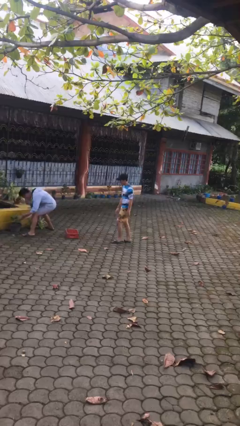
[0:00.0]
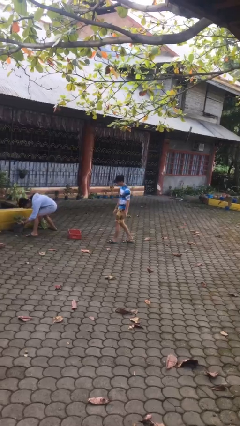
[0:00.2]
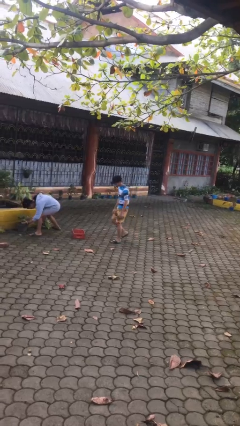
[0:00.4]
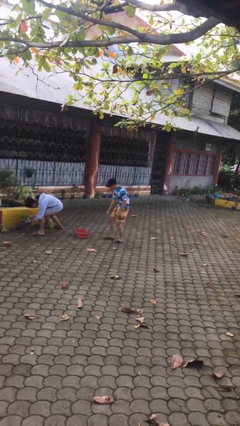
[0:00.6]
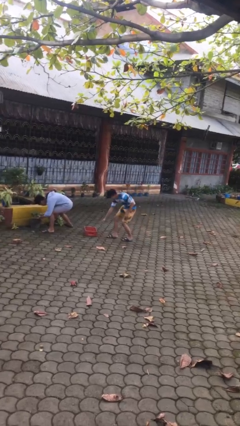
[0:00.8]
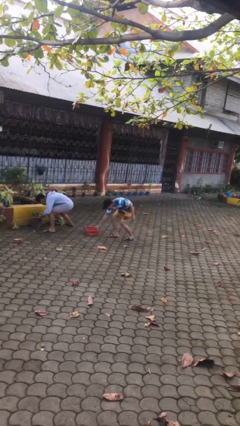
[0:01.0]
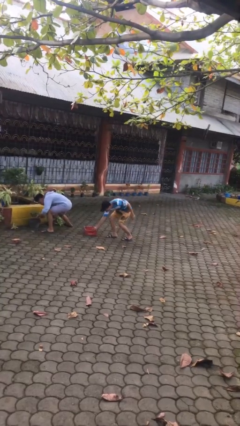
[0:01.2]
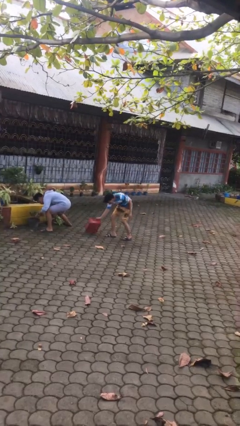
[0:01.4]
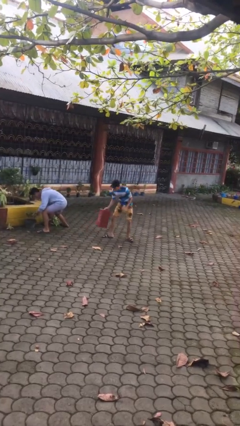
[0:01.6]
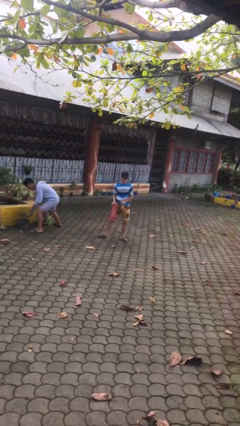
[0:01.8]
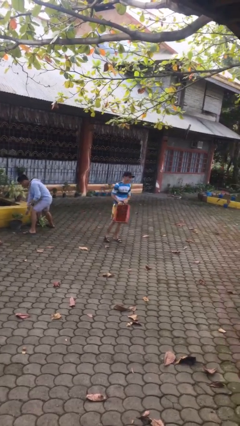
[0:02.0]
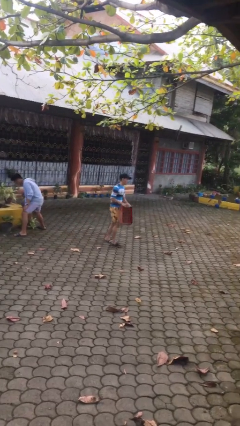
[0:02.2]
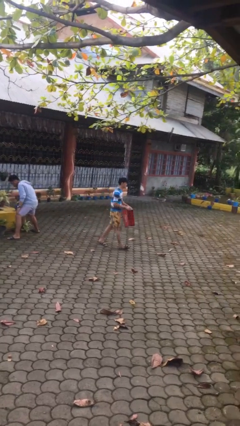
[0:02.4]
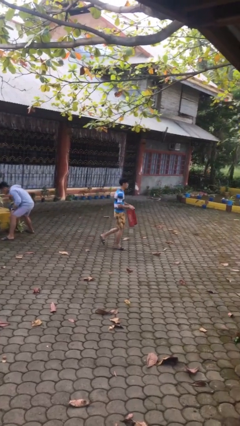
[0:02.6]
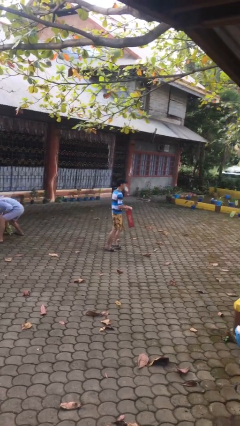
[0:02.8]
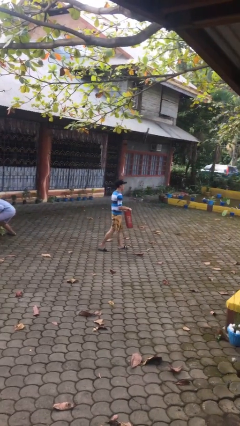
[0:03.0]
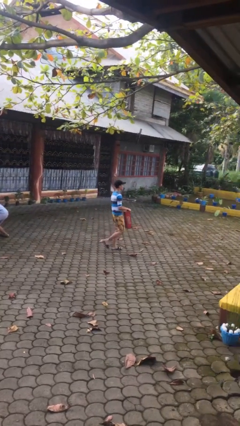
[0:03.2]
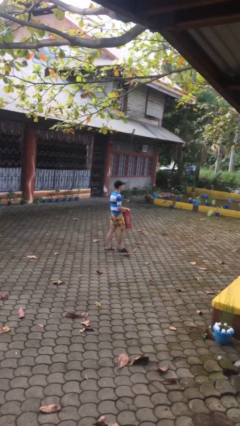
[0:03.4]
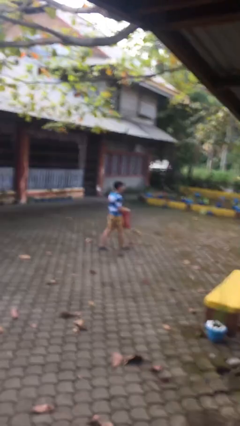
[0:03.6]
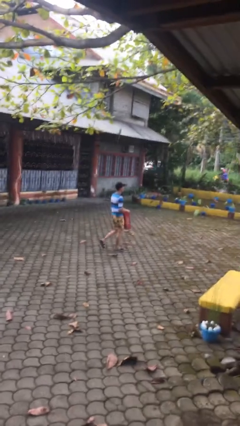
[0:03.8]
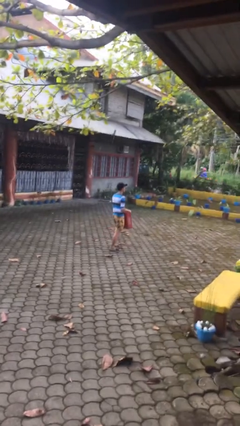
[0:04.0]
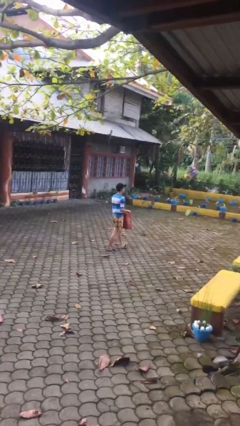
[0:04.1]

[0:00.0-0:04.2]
person steals object from person

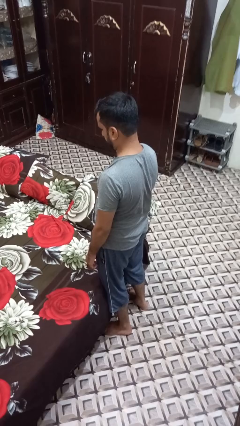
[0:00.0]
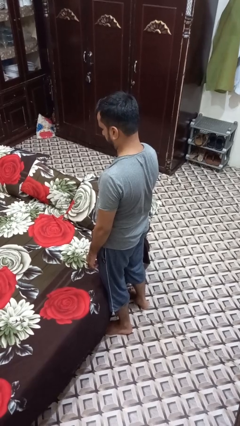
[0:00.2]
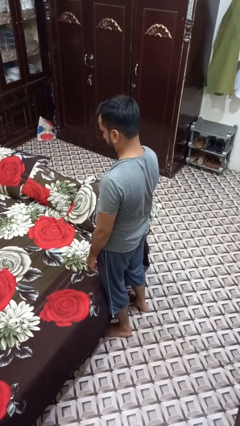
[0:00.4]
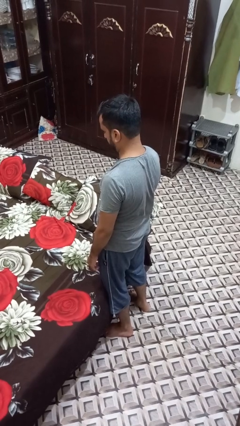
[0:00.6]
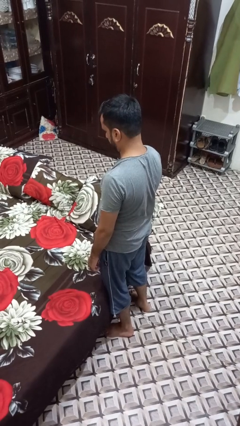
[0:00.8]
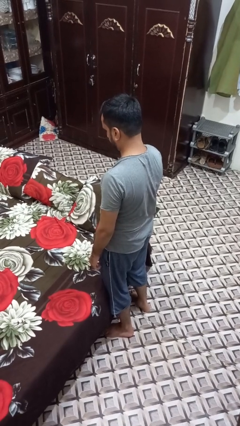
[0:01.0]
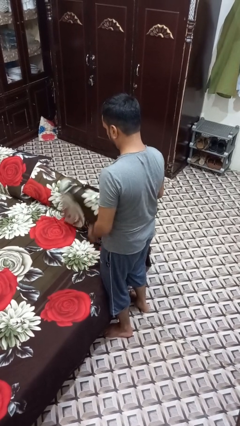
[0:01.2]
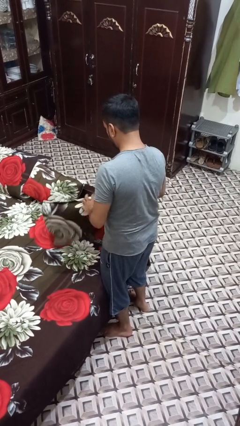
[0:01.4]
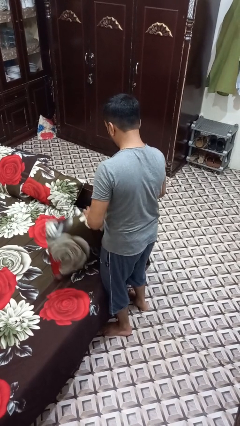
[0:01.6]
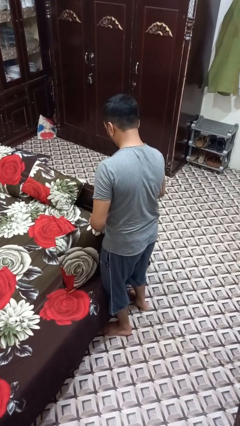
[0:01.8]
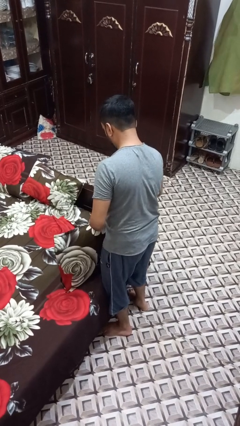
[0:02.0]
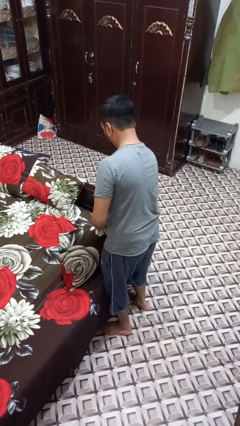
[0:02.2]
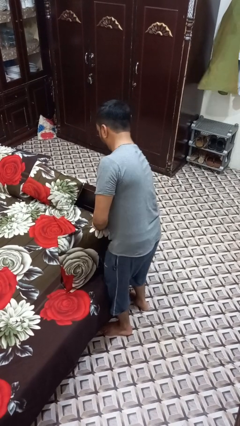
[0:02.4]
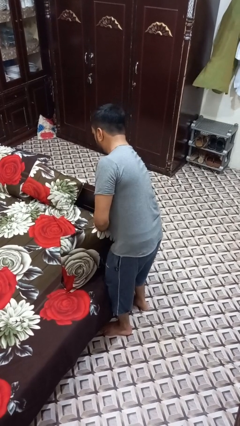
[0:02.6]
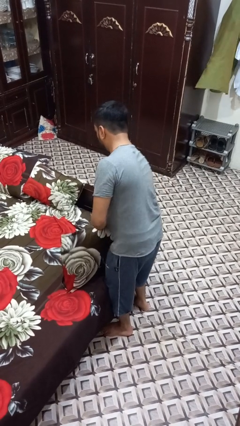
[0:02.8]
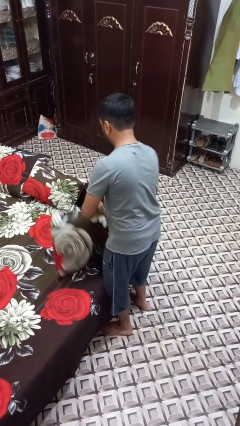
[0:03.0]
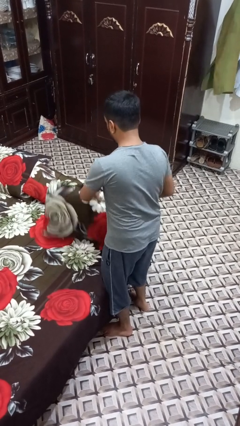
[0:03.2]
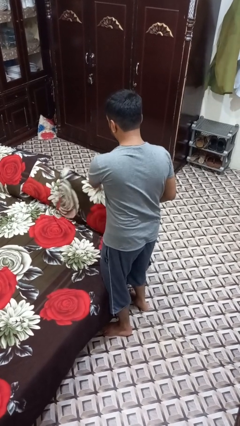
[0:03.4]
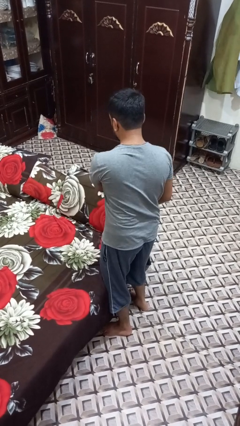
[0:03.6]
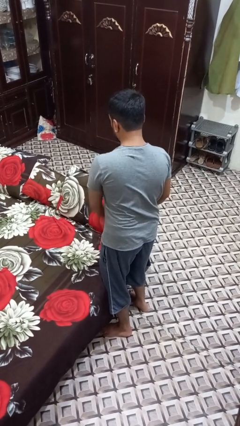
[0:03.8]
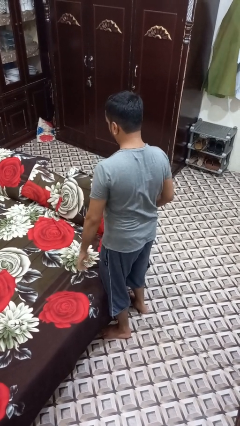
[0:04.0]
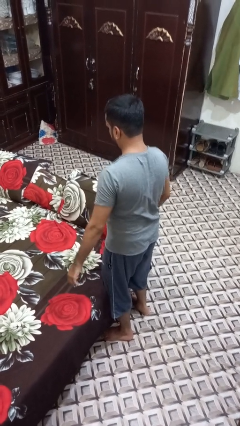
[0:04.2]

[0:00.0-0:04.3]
person searches in couch

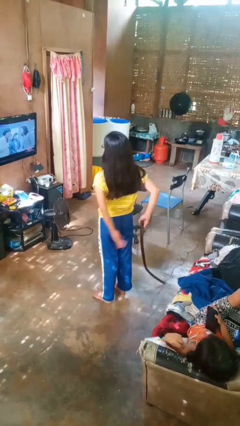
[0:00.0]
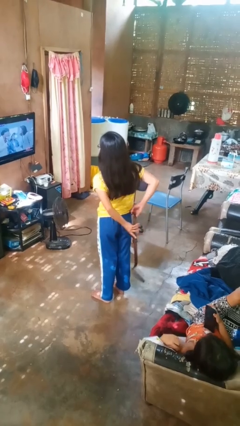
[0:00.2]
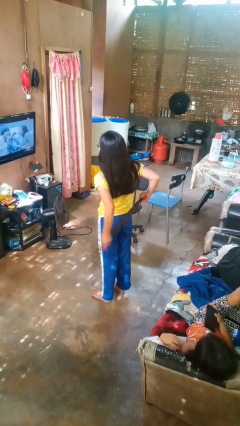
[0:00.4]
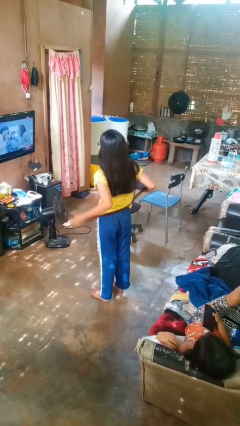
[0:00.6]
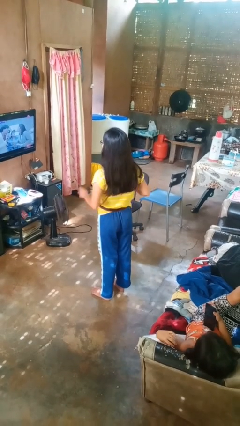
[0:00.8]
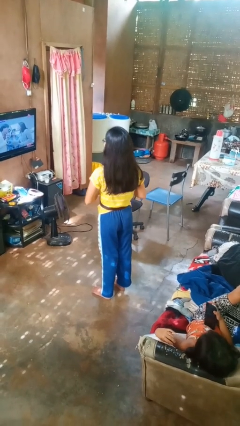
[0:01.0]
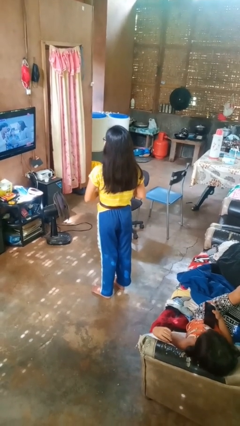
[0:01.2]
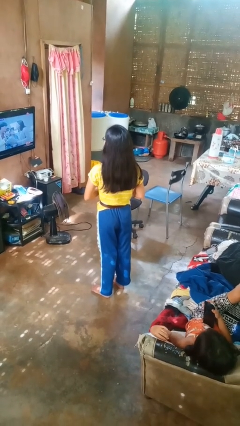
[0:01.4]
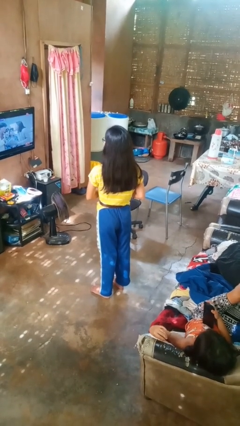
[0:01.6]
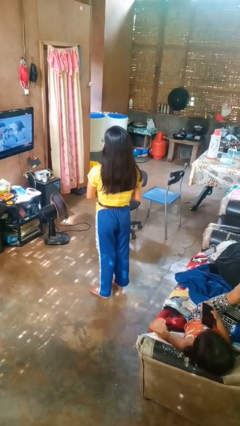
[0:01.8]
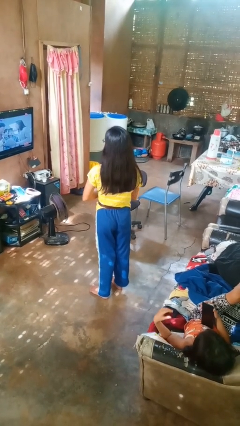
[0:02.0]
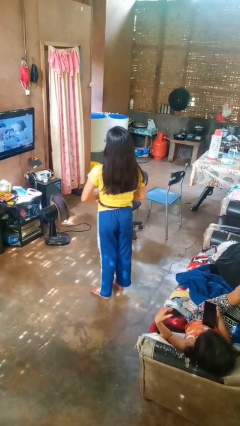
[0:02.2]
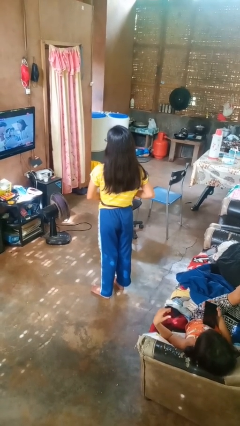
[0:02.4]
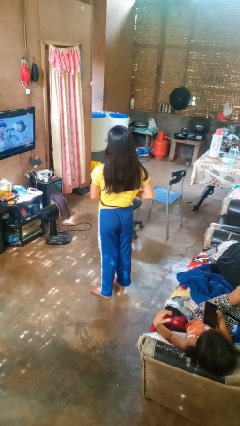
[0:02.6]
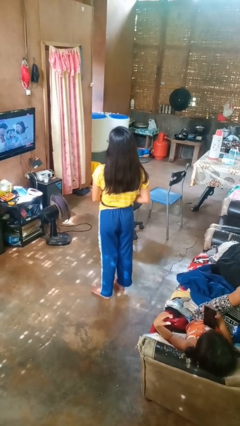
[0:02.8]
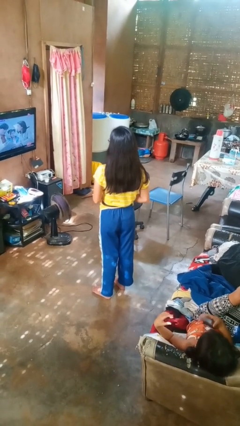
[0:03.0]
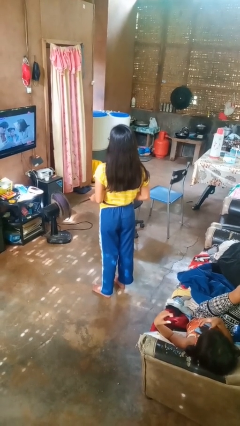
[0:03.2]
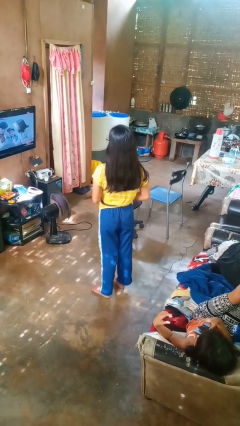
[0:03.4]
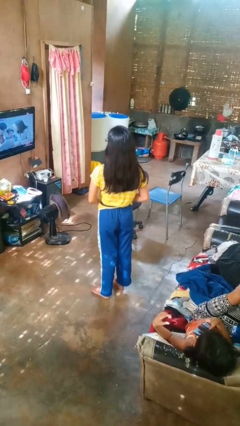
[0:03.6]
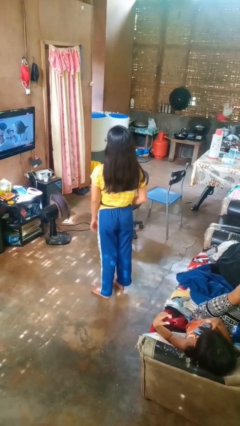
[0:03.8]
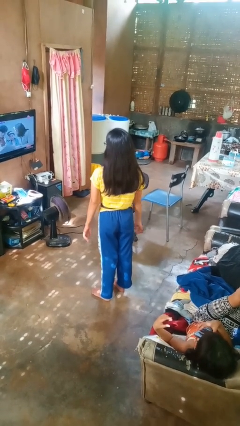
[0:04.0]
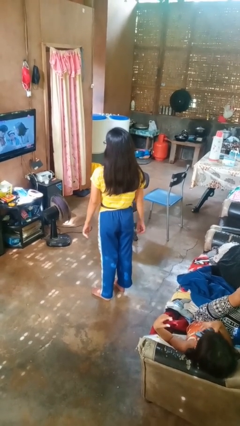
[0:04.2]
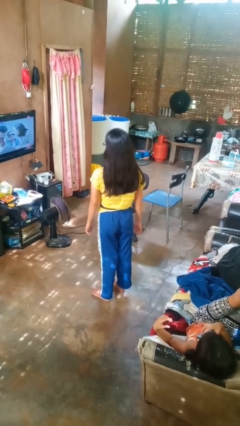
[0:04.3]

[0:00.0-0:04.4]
person puts on belt

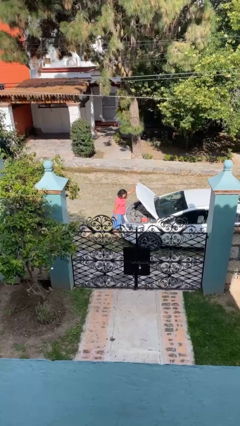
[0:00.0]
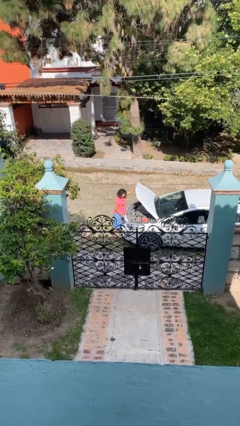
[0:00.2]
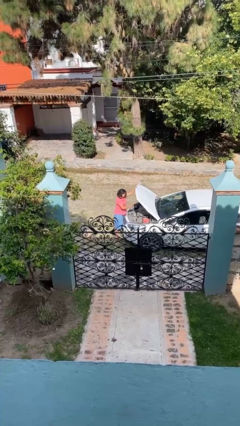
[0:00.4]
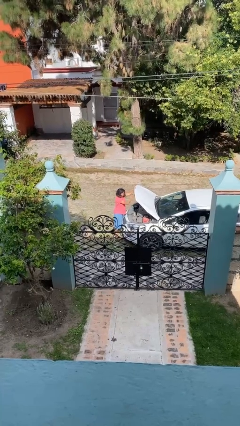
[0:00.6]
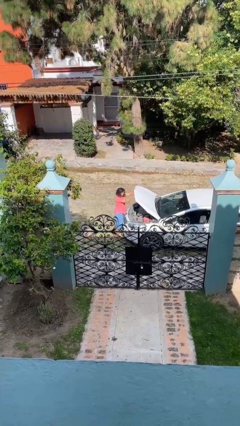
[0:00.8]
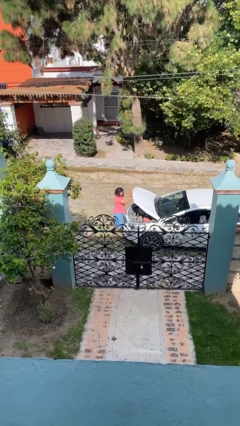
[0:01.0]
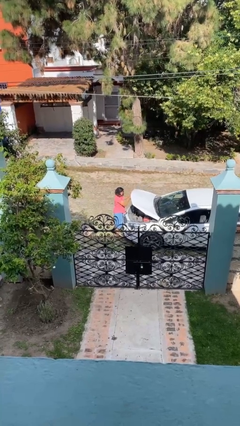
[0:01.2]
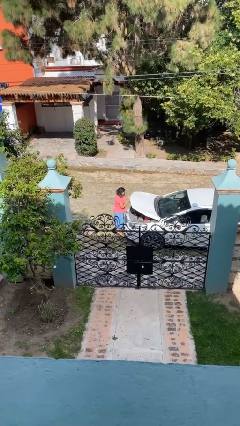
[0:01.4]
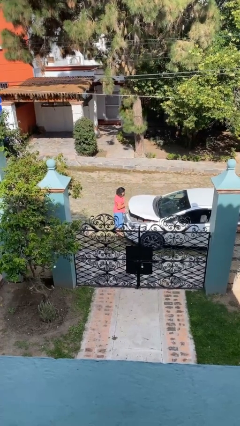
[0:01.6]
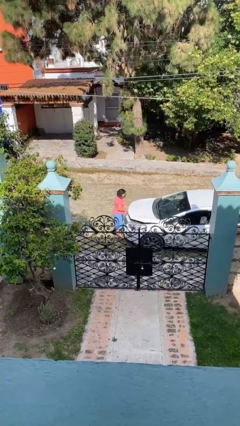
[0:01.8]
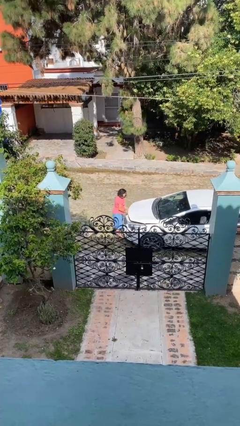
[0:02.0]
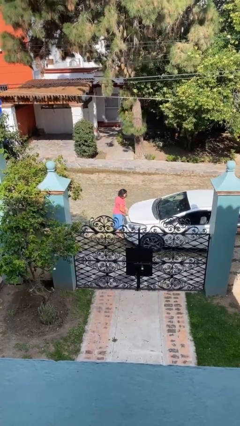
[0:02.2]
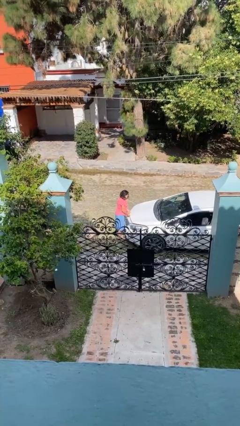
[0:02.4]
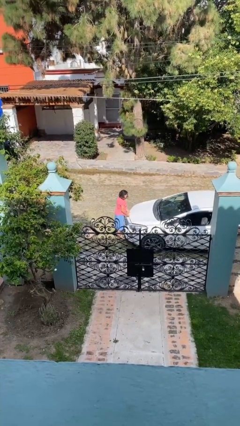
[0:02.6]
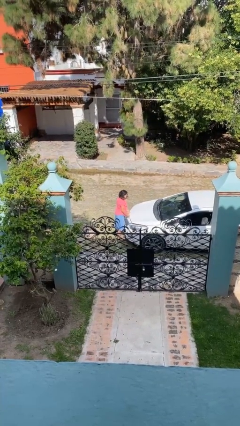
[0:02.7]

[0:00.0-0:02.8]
person closes car hood

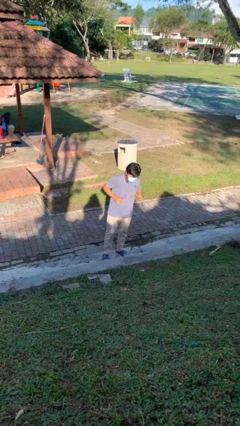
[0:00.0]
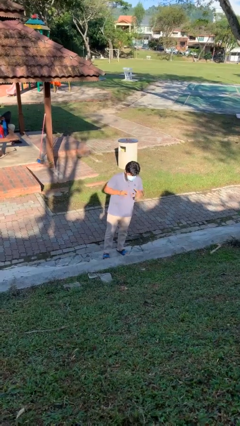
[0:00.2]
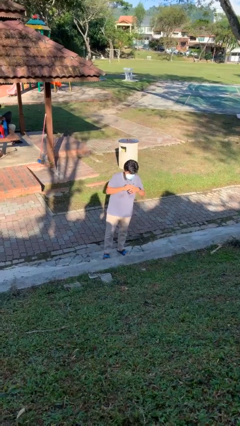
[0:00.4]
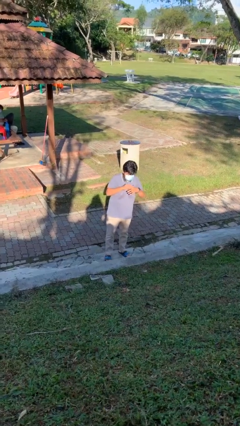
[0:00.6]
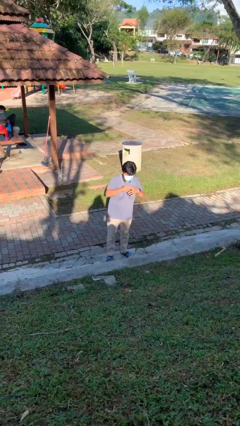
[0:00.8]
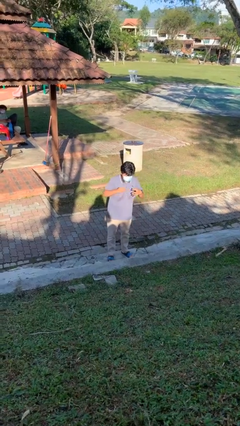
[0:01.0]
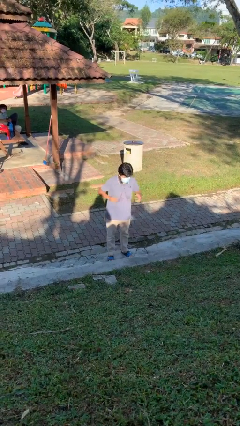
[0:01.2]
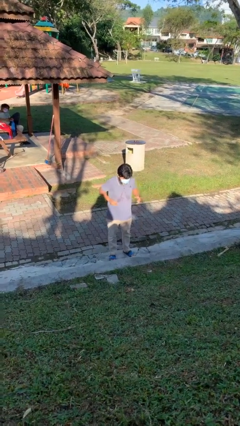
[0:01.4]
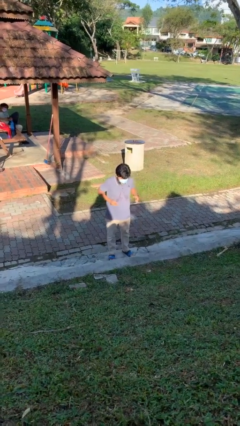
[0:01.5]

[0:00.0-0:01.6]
person takes off ring

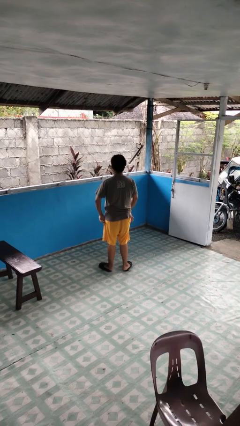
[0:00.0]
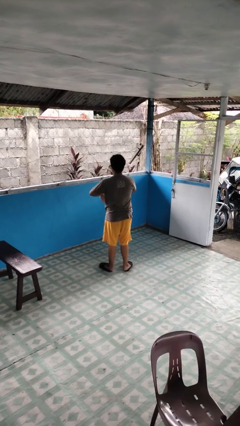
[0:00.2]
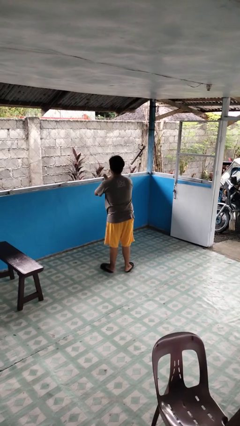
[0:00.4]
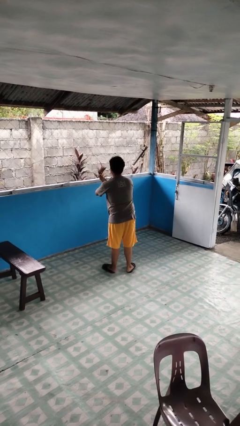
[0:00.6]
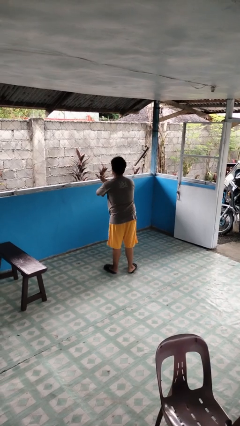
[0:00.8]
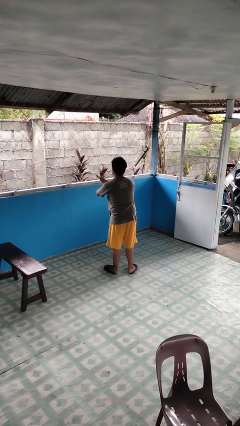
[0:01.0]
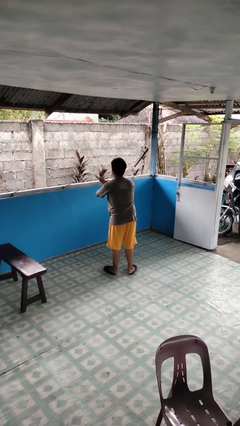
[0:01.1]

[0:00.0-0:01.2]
person gestures arms x
